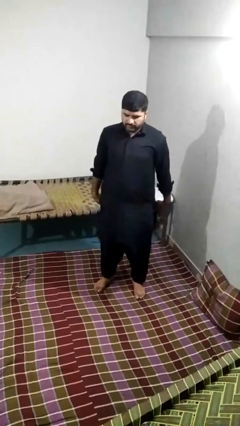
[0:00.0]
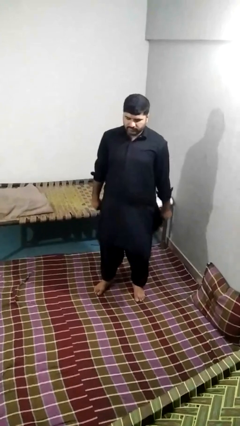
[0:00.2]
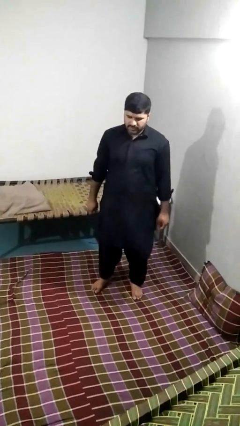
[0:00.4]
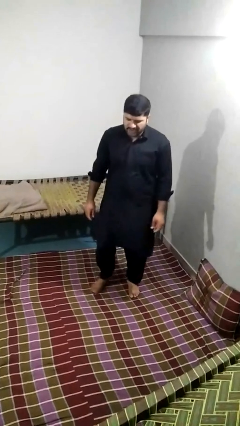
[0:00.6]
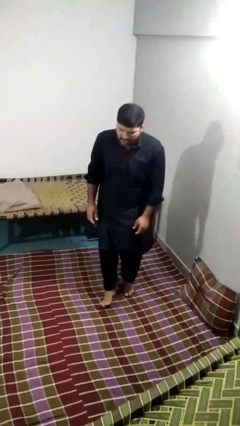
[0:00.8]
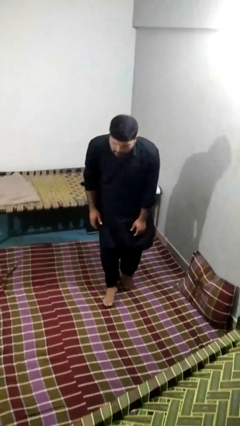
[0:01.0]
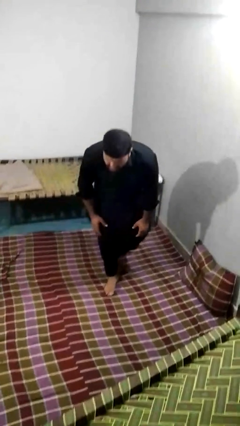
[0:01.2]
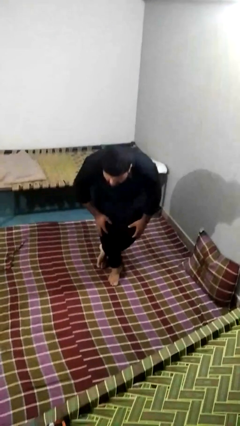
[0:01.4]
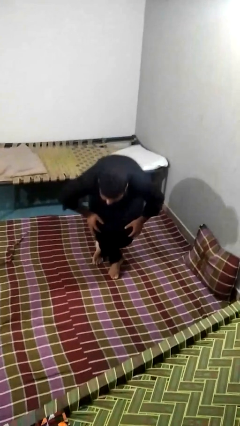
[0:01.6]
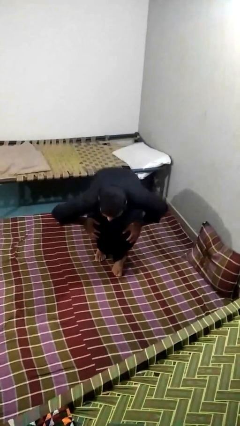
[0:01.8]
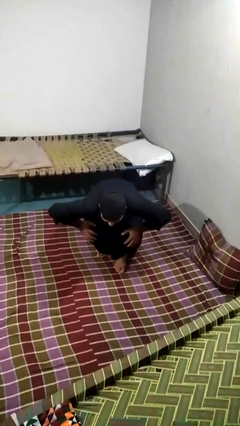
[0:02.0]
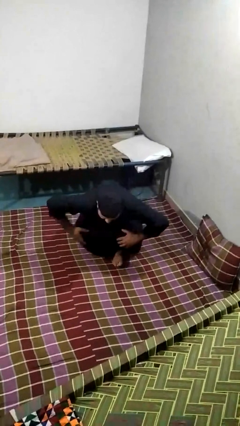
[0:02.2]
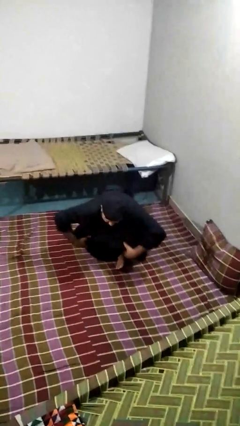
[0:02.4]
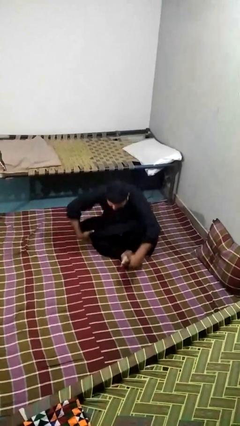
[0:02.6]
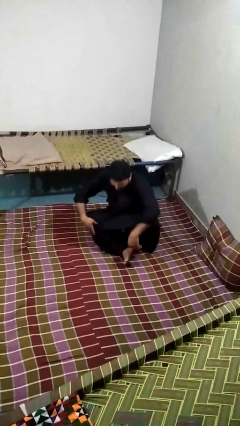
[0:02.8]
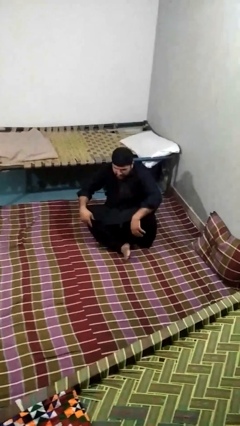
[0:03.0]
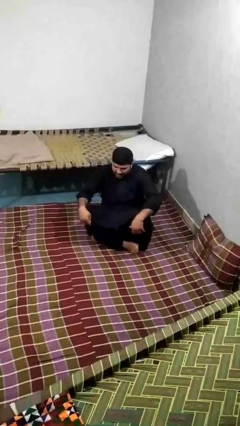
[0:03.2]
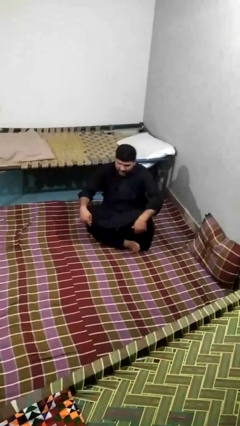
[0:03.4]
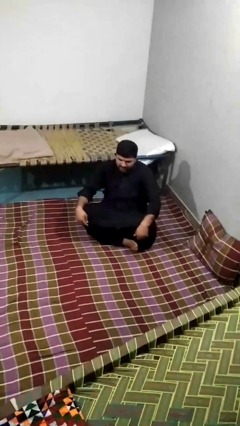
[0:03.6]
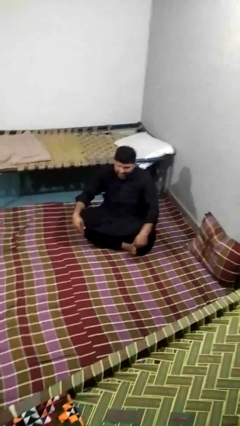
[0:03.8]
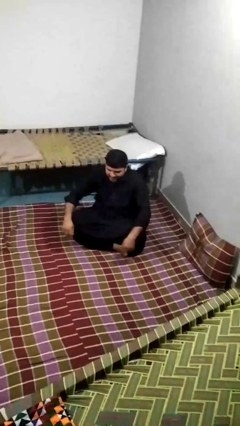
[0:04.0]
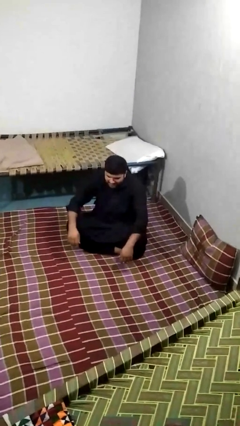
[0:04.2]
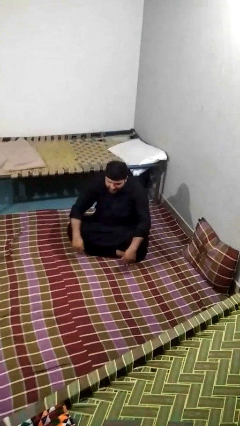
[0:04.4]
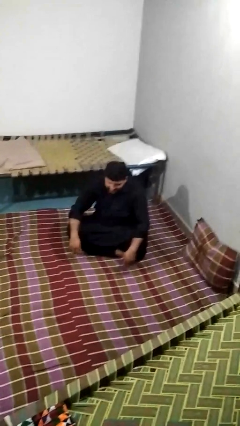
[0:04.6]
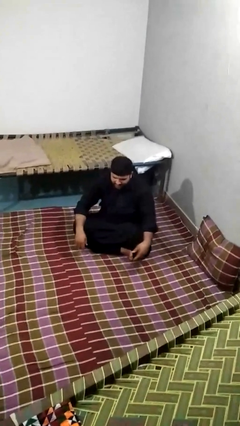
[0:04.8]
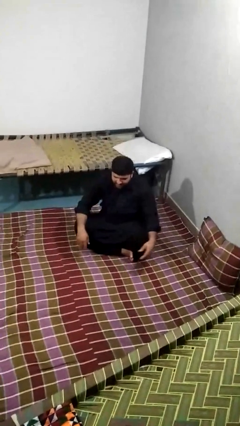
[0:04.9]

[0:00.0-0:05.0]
person sits crisscross

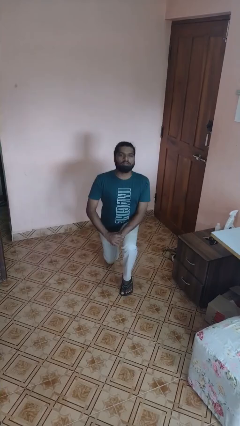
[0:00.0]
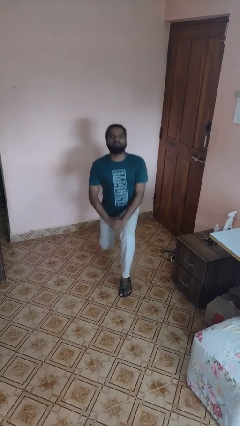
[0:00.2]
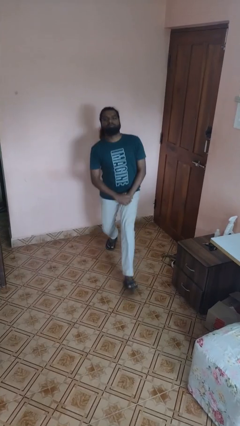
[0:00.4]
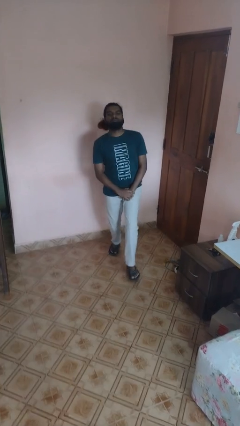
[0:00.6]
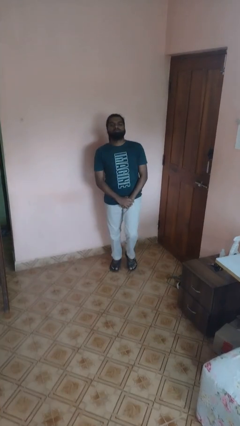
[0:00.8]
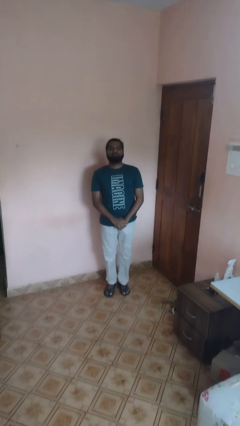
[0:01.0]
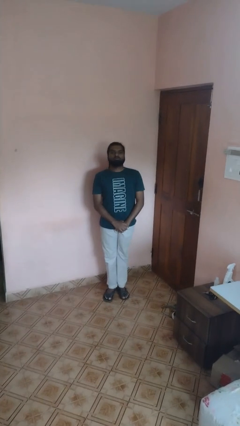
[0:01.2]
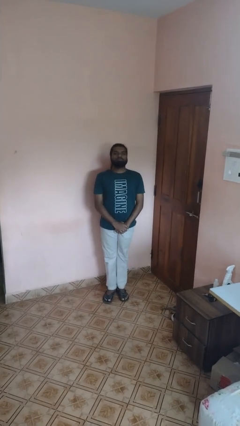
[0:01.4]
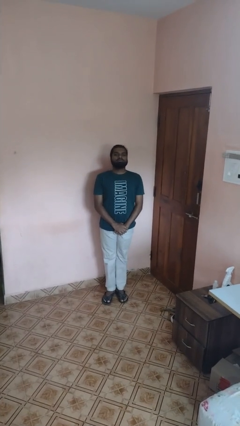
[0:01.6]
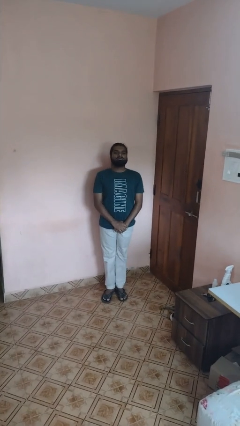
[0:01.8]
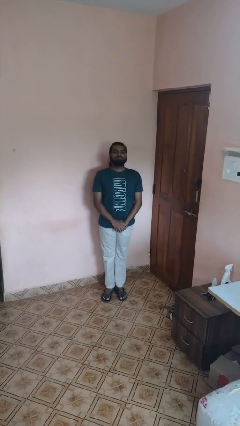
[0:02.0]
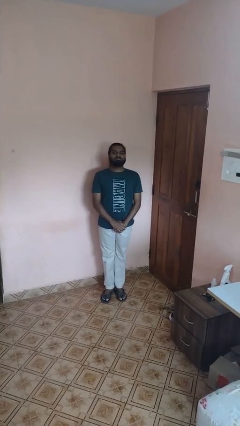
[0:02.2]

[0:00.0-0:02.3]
person stands up from floor

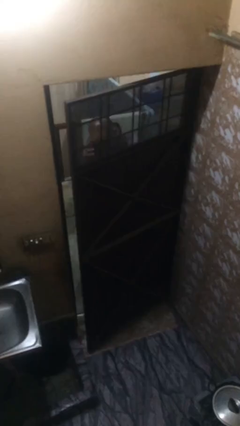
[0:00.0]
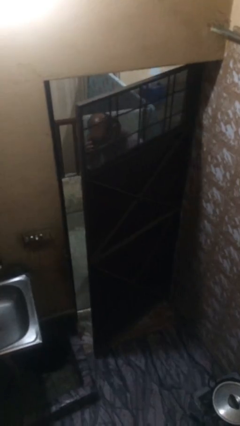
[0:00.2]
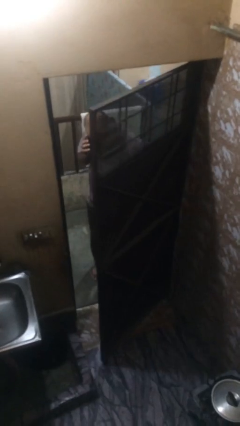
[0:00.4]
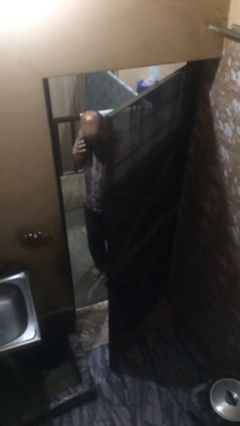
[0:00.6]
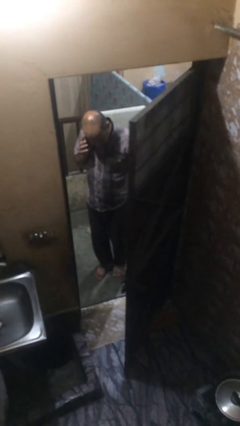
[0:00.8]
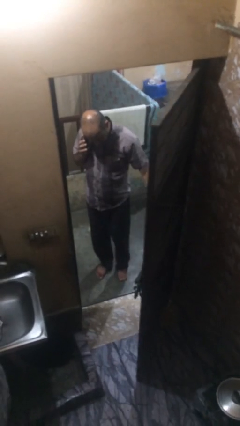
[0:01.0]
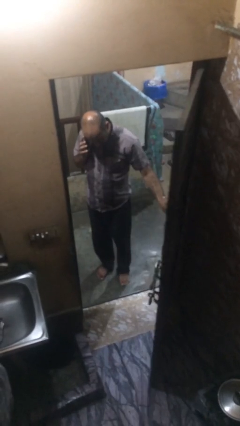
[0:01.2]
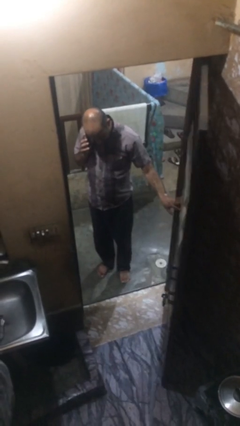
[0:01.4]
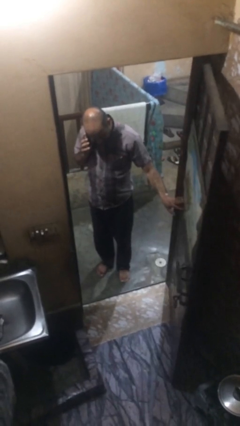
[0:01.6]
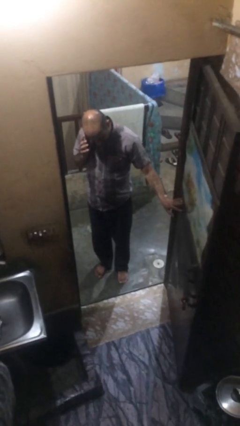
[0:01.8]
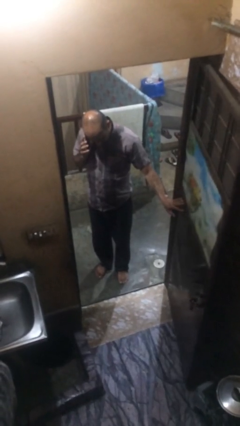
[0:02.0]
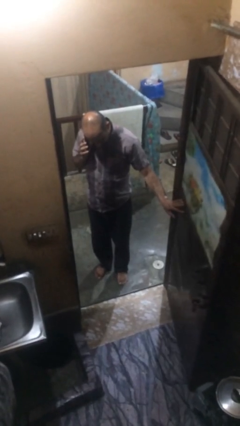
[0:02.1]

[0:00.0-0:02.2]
person opens facility door

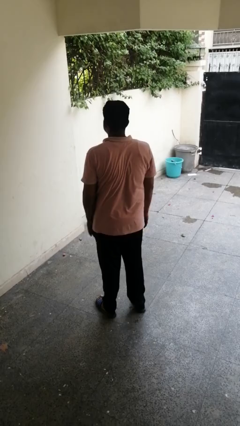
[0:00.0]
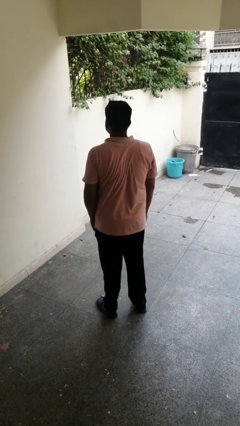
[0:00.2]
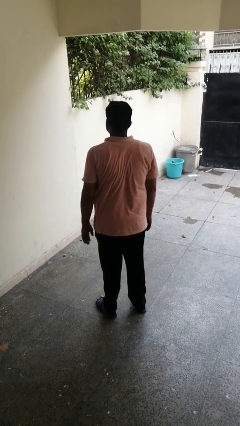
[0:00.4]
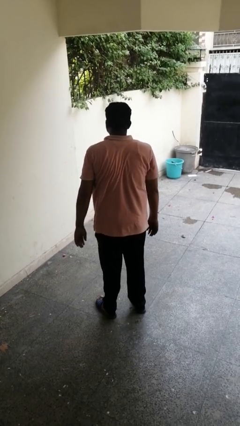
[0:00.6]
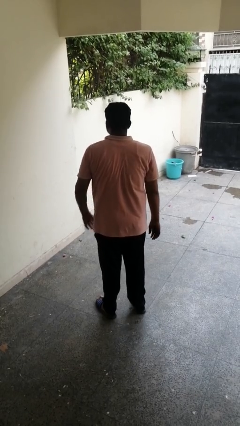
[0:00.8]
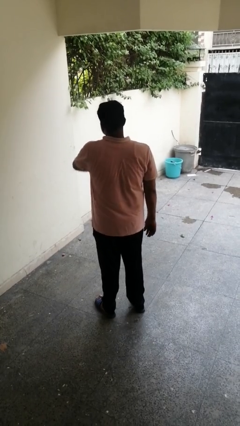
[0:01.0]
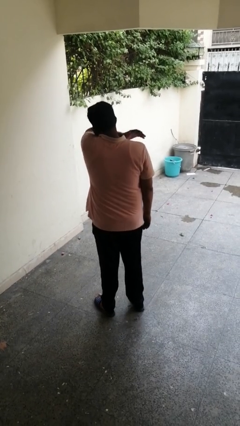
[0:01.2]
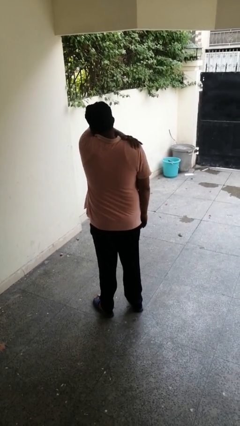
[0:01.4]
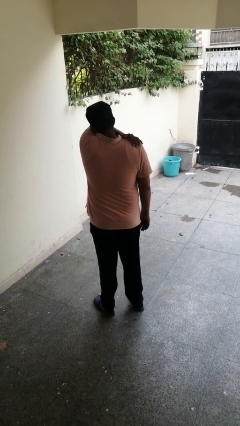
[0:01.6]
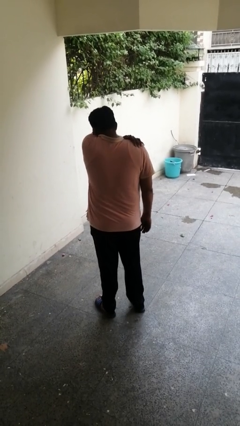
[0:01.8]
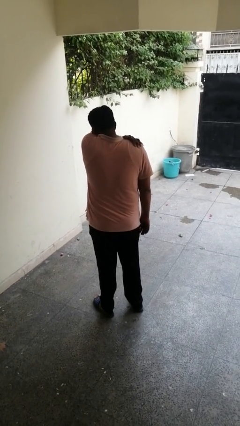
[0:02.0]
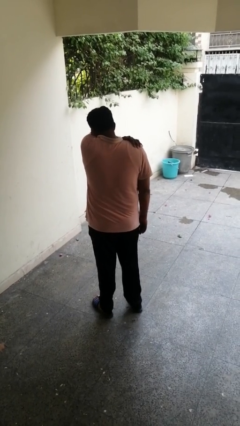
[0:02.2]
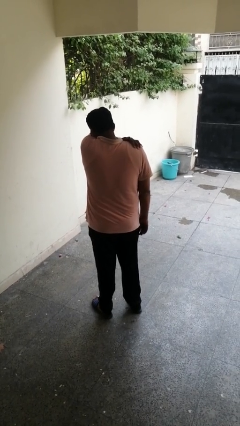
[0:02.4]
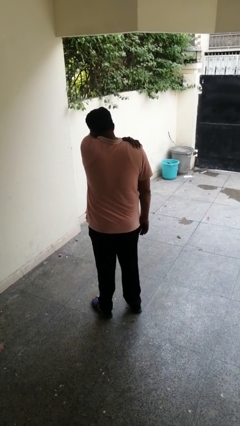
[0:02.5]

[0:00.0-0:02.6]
person sneezes into arm

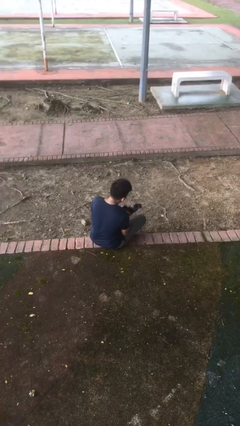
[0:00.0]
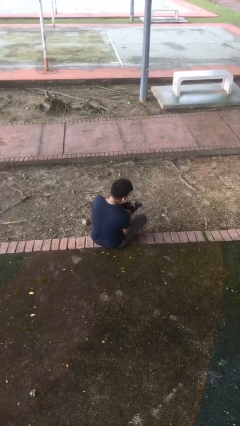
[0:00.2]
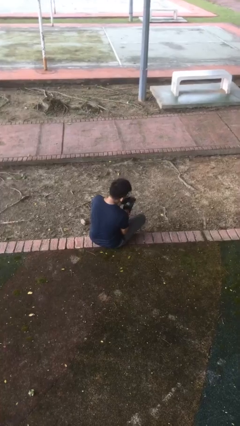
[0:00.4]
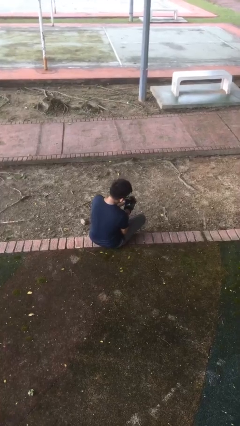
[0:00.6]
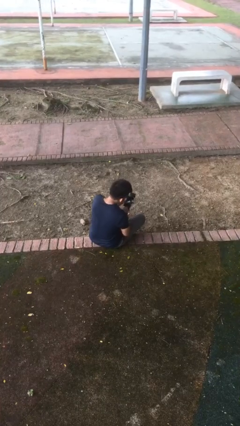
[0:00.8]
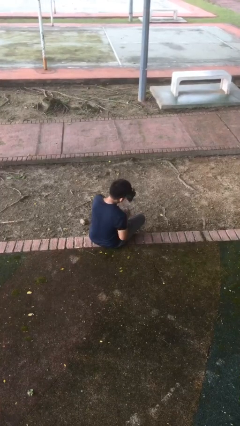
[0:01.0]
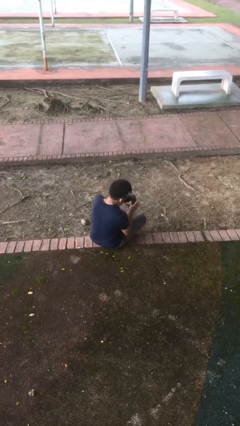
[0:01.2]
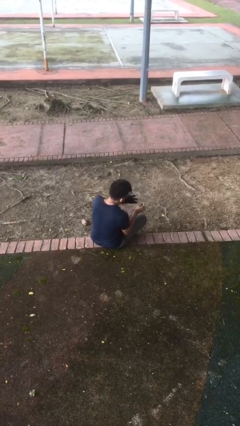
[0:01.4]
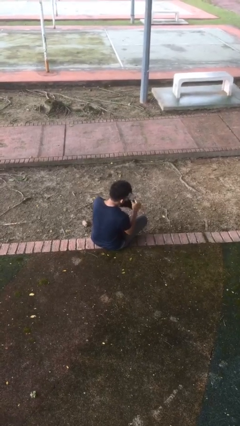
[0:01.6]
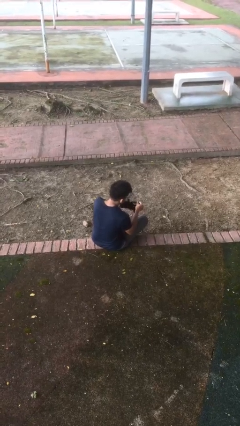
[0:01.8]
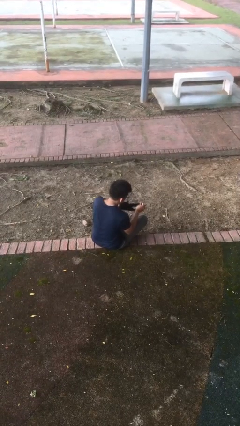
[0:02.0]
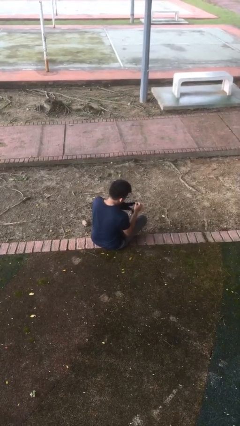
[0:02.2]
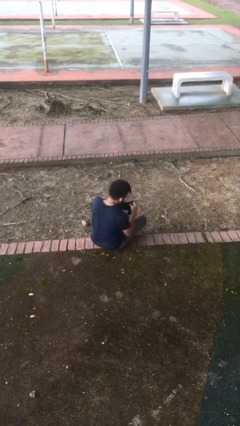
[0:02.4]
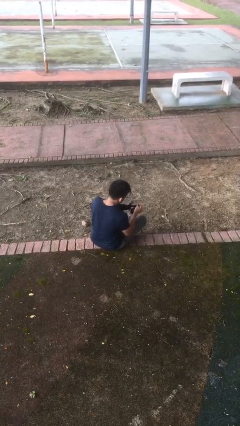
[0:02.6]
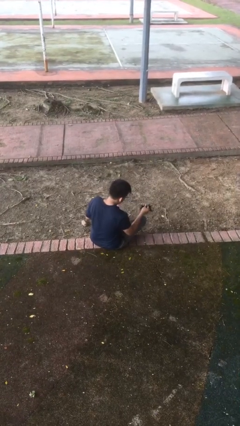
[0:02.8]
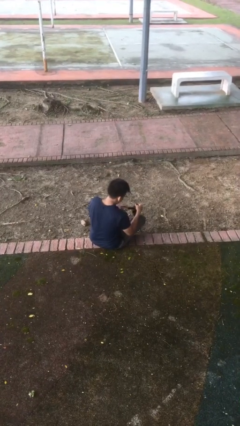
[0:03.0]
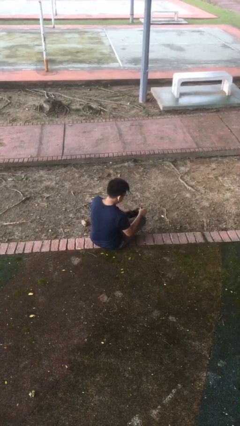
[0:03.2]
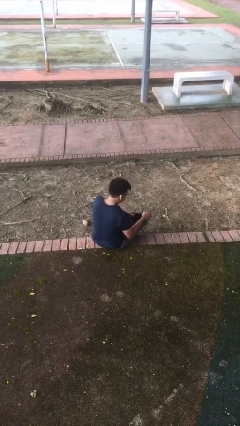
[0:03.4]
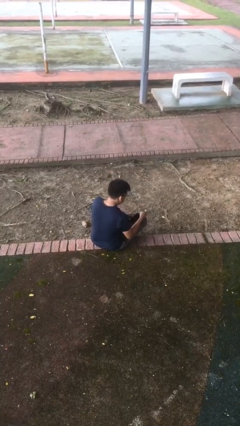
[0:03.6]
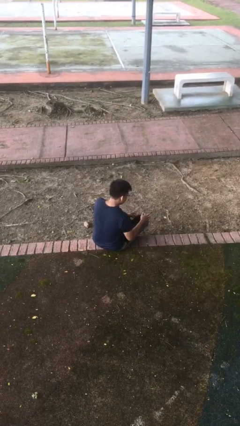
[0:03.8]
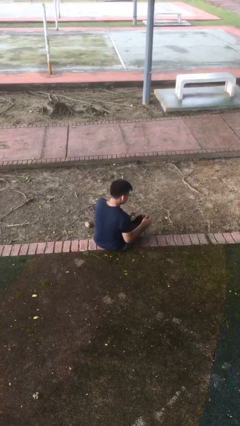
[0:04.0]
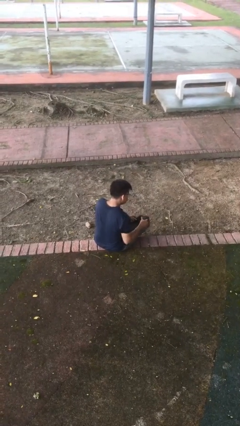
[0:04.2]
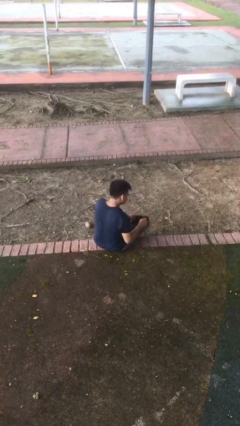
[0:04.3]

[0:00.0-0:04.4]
person takes off gloves

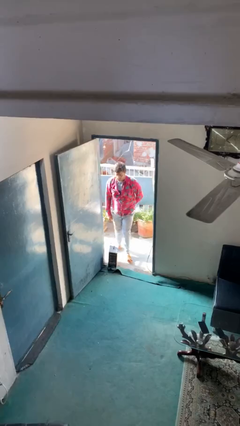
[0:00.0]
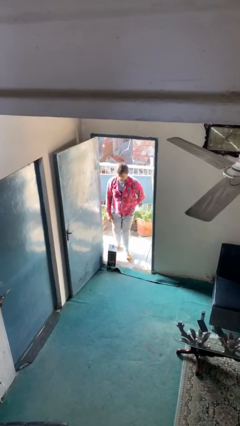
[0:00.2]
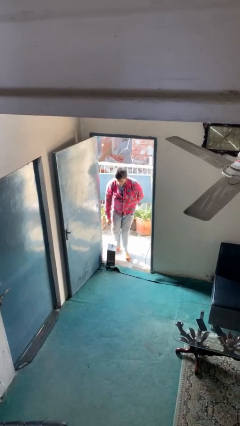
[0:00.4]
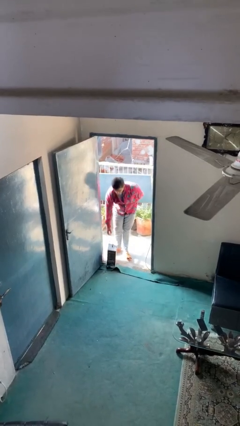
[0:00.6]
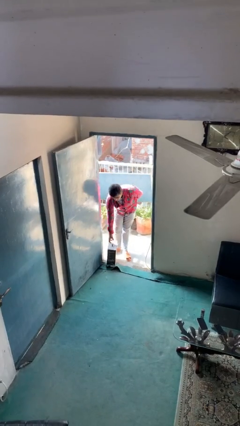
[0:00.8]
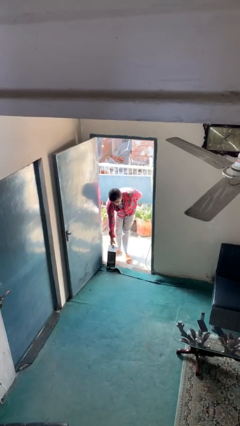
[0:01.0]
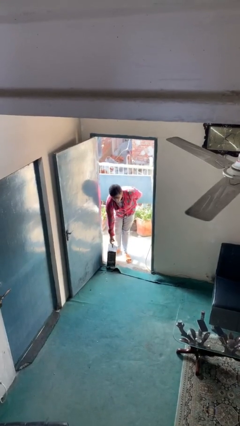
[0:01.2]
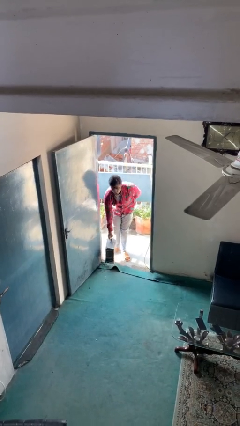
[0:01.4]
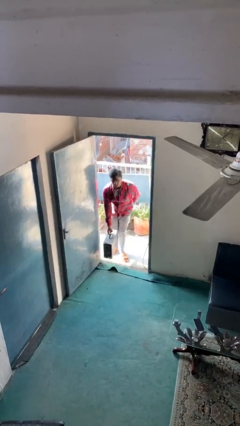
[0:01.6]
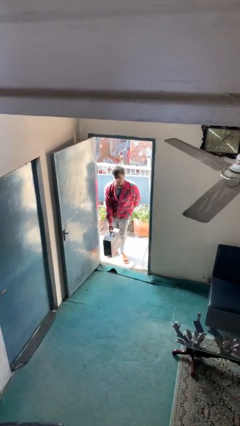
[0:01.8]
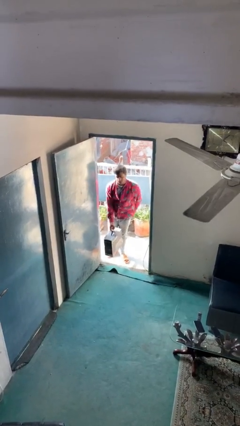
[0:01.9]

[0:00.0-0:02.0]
person picks up object from floor
